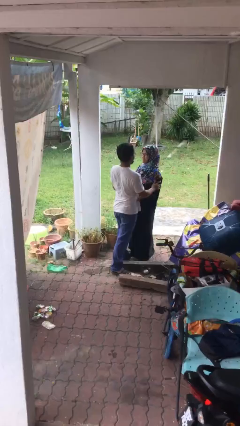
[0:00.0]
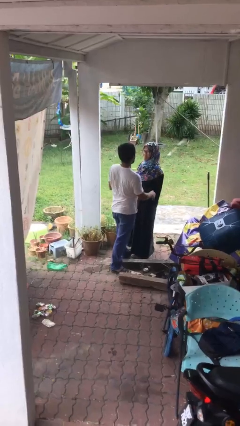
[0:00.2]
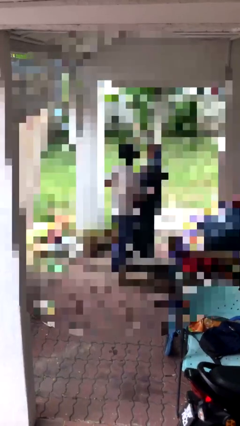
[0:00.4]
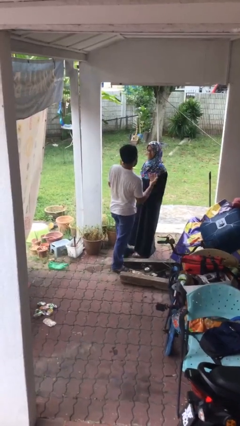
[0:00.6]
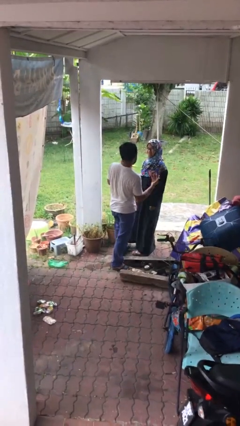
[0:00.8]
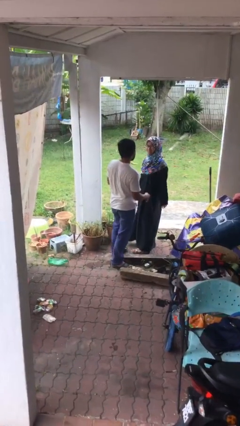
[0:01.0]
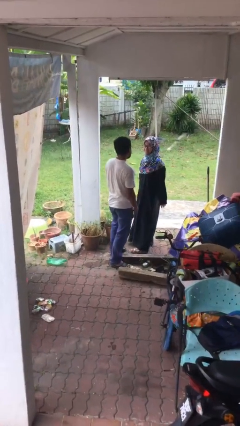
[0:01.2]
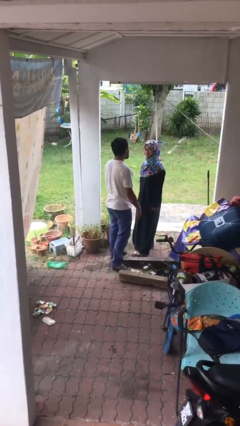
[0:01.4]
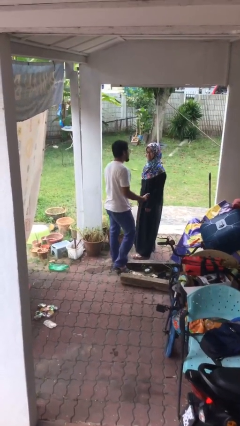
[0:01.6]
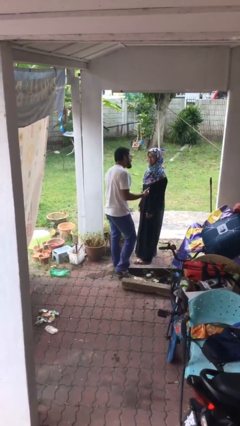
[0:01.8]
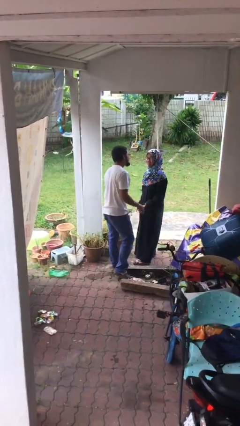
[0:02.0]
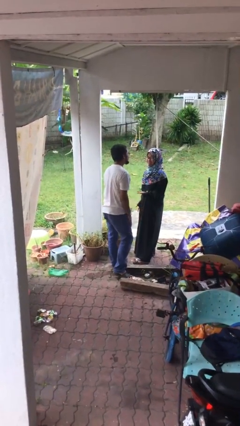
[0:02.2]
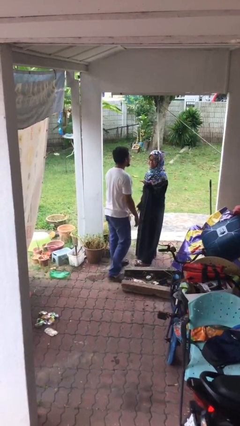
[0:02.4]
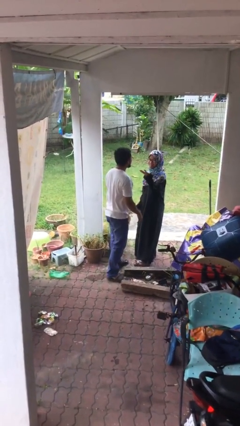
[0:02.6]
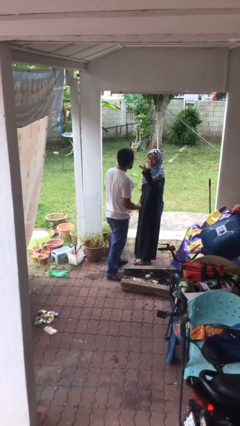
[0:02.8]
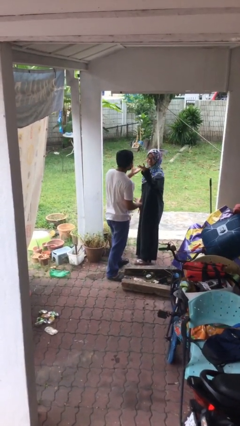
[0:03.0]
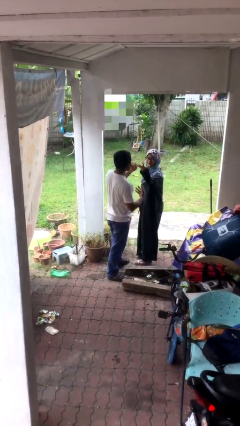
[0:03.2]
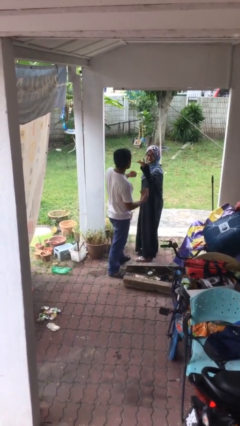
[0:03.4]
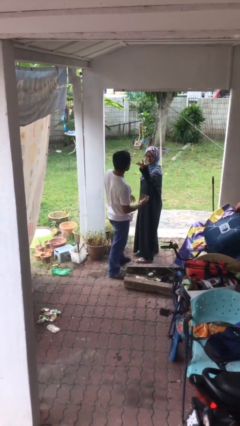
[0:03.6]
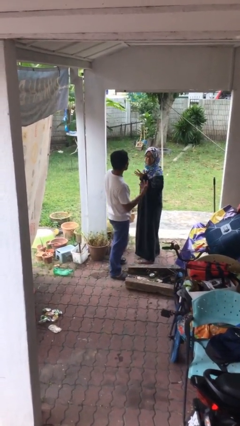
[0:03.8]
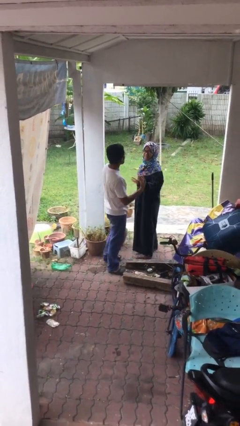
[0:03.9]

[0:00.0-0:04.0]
person talks to person

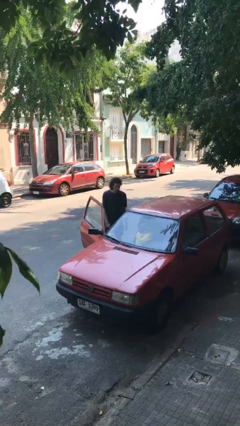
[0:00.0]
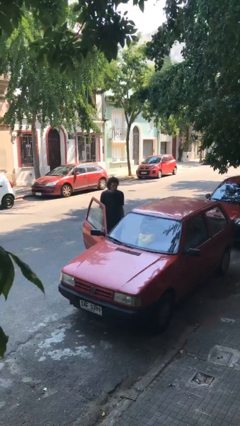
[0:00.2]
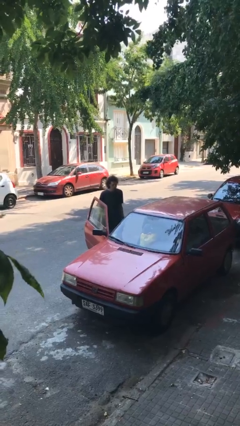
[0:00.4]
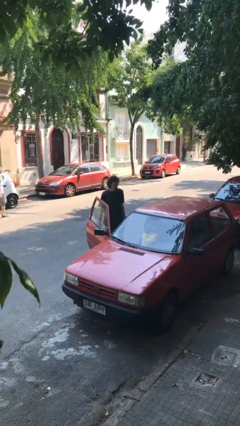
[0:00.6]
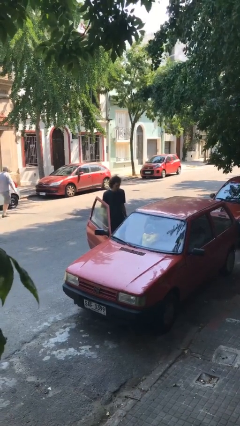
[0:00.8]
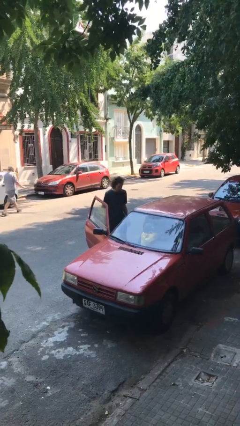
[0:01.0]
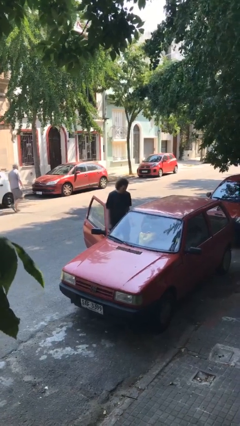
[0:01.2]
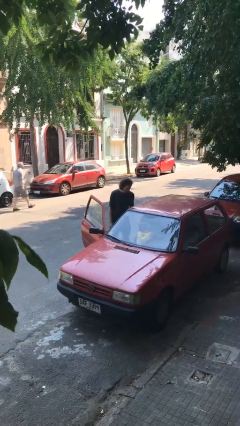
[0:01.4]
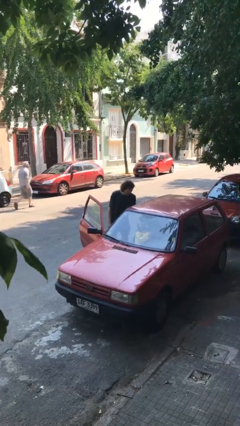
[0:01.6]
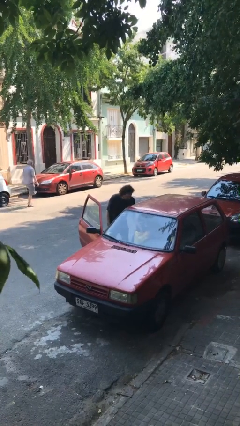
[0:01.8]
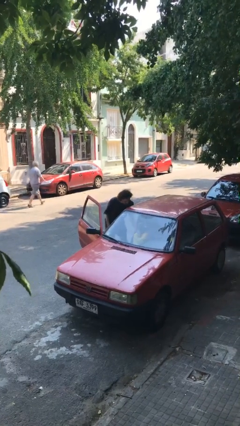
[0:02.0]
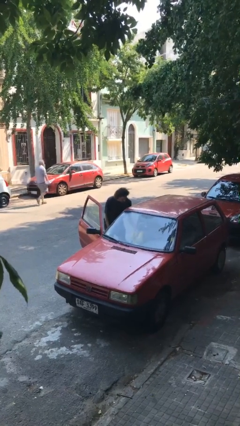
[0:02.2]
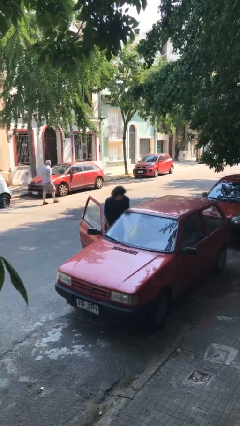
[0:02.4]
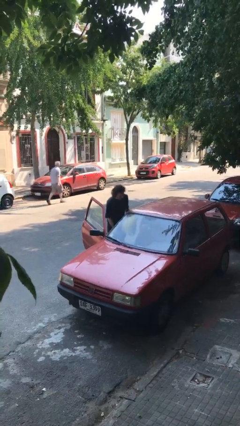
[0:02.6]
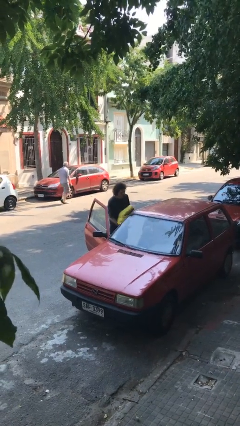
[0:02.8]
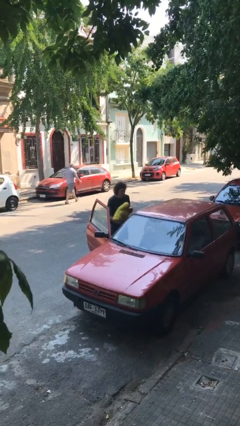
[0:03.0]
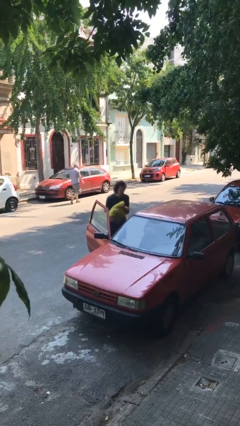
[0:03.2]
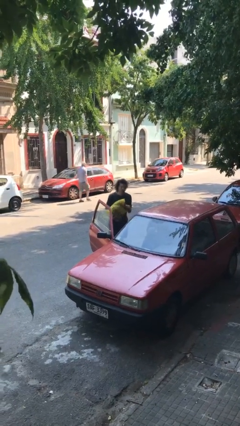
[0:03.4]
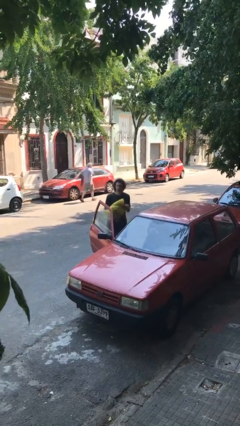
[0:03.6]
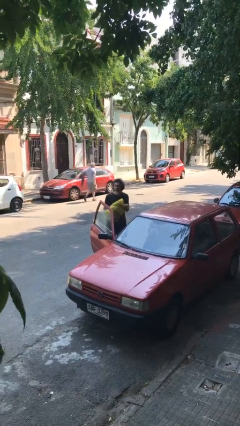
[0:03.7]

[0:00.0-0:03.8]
person unloads car

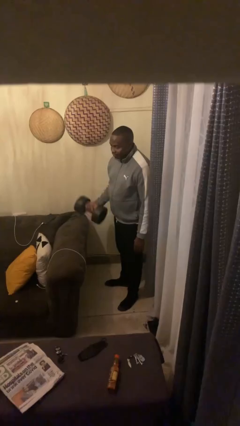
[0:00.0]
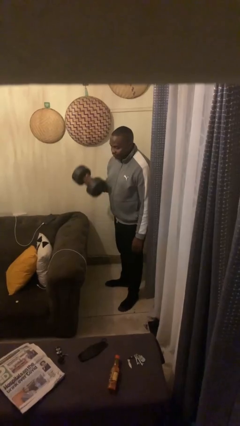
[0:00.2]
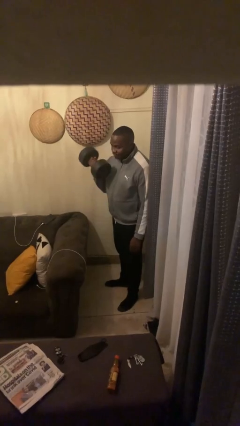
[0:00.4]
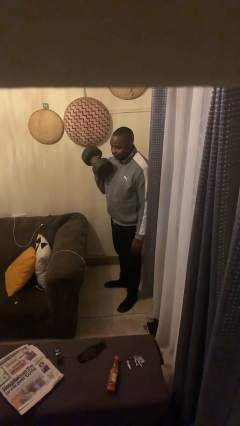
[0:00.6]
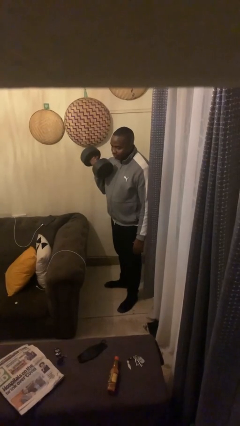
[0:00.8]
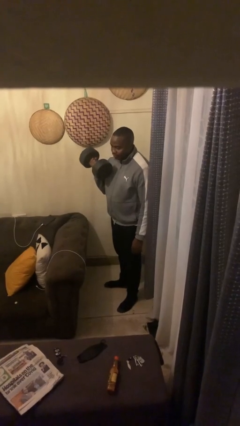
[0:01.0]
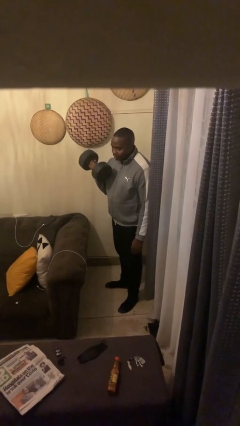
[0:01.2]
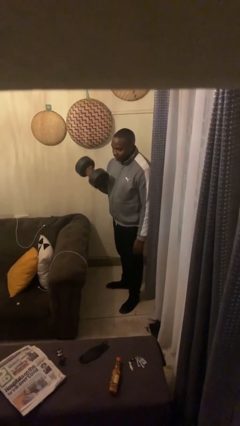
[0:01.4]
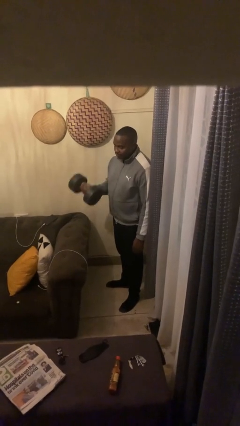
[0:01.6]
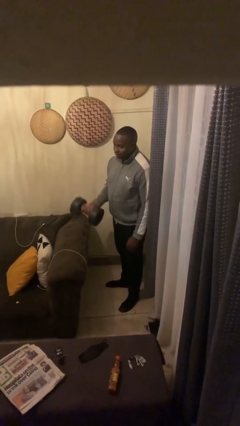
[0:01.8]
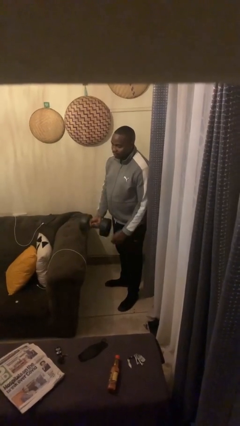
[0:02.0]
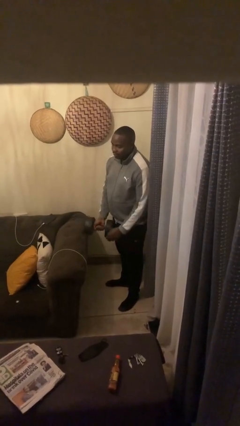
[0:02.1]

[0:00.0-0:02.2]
person lifts dumbbells

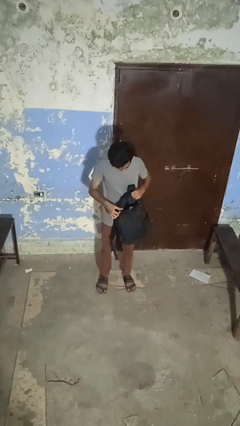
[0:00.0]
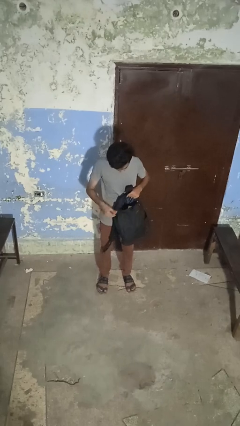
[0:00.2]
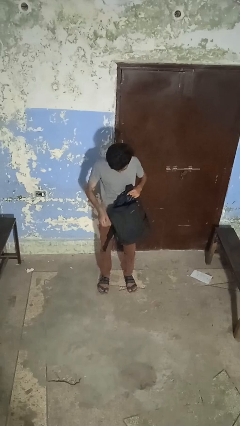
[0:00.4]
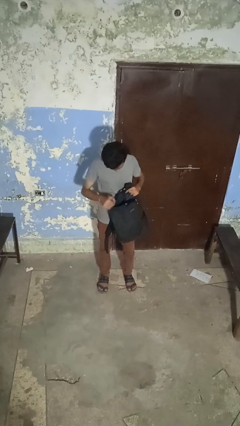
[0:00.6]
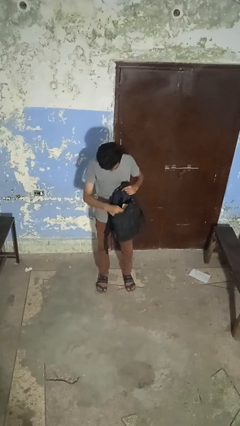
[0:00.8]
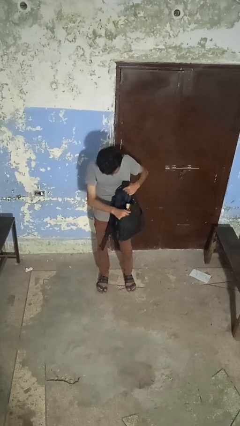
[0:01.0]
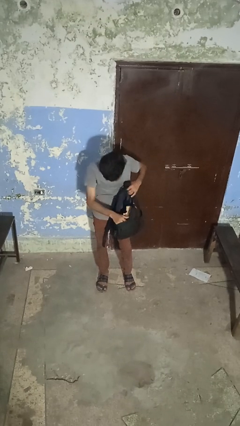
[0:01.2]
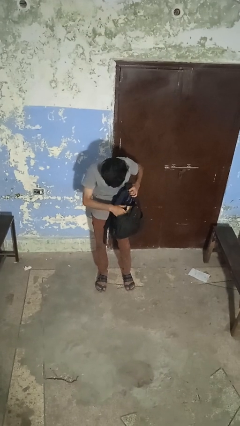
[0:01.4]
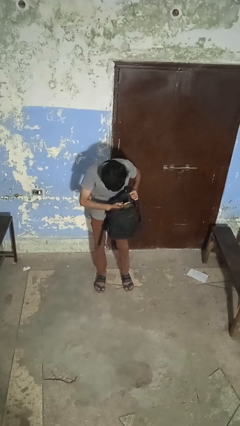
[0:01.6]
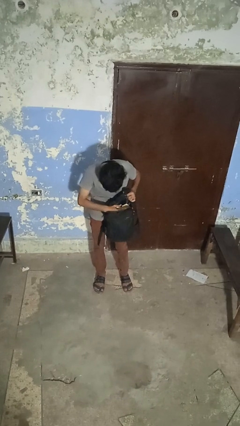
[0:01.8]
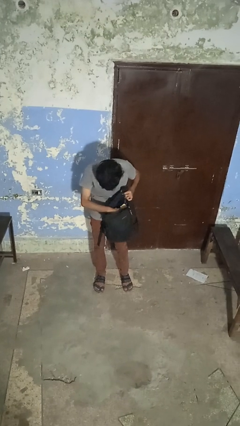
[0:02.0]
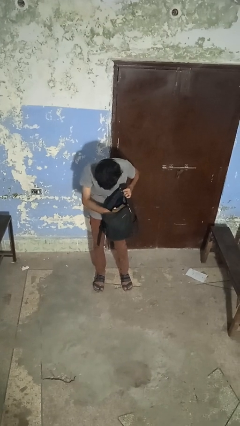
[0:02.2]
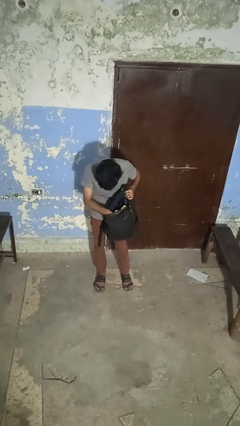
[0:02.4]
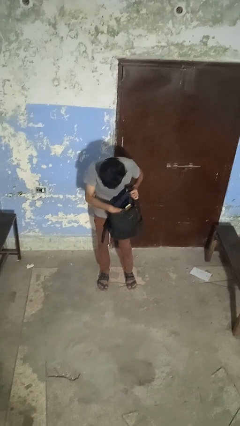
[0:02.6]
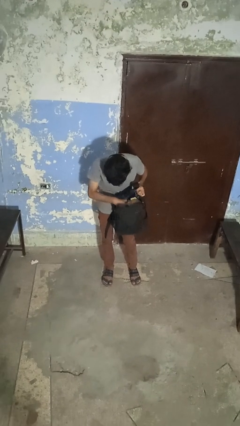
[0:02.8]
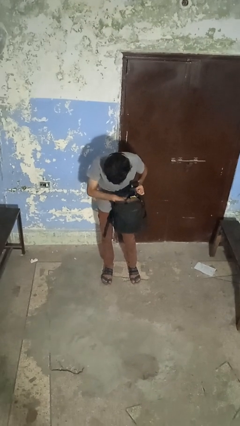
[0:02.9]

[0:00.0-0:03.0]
person searches in backpack

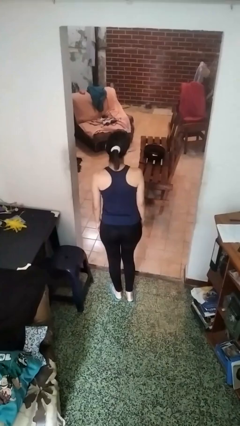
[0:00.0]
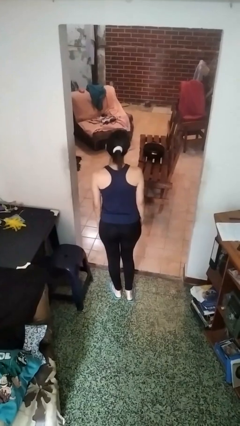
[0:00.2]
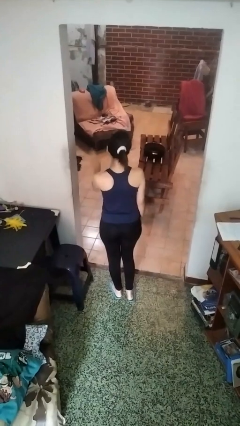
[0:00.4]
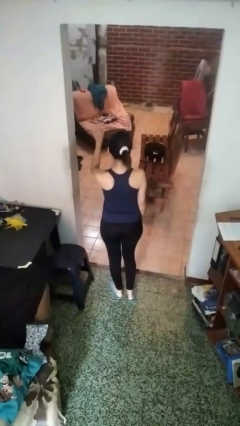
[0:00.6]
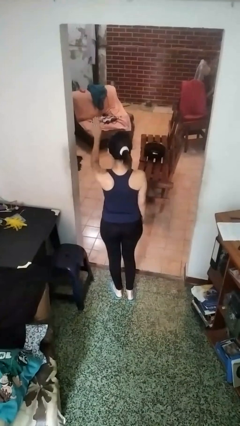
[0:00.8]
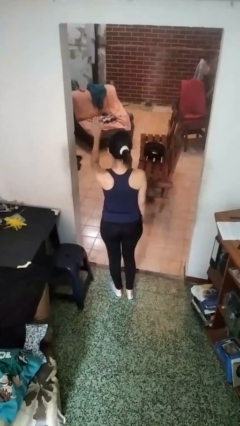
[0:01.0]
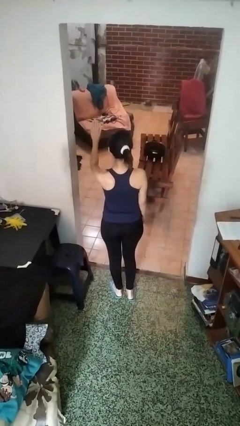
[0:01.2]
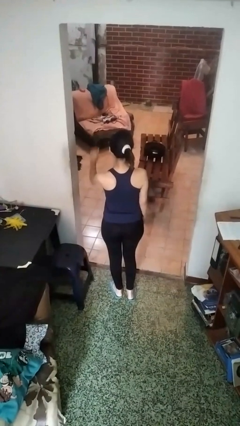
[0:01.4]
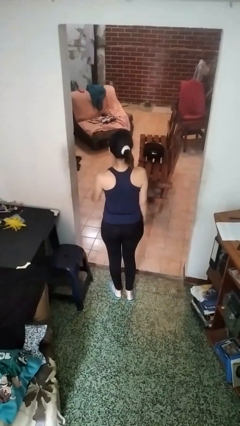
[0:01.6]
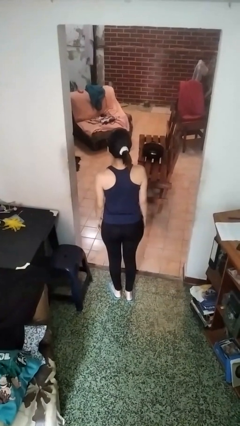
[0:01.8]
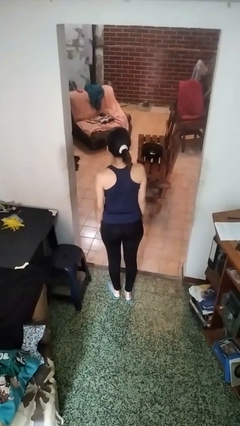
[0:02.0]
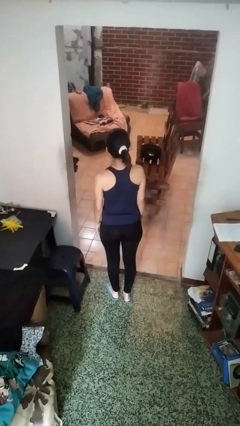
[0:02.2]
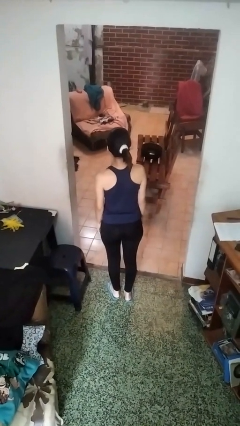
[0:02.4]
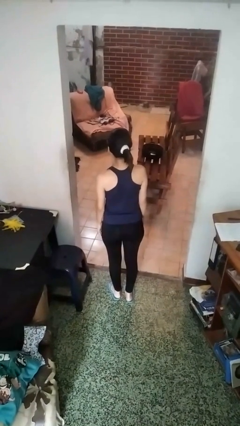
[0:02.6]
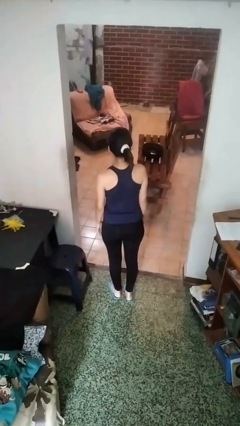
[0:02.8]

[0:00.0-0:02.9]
person gestures stop

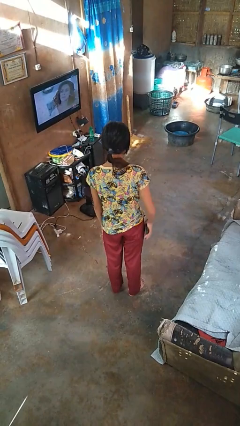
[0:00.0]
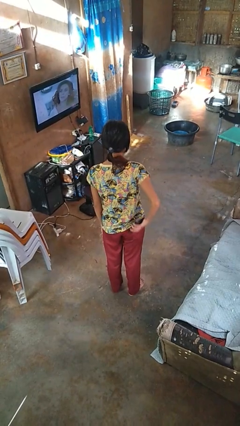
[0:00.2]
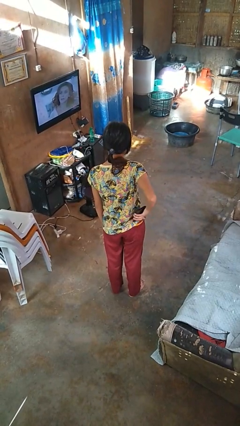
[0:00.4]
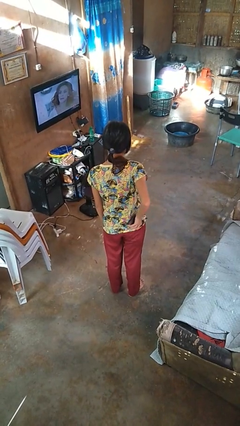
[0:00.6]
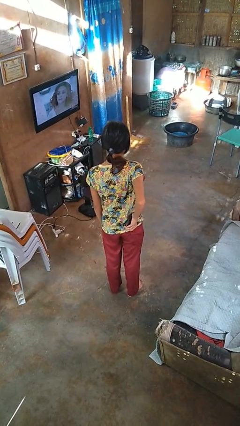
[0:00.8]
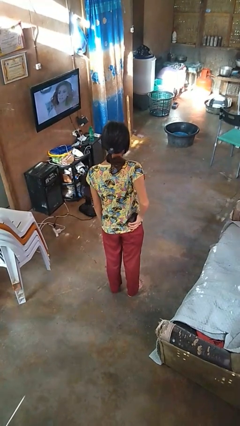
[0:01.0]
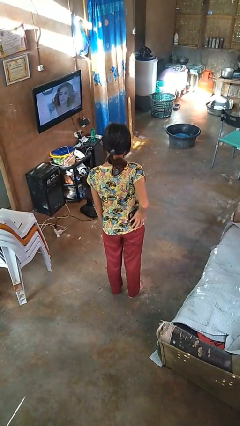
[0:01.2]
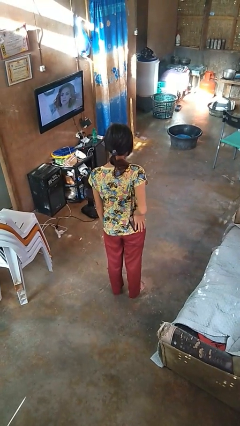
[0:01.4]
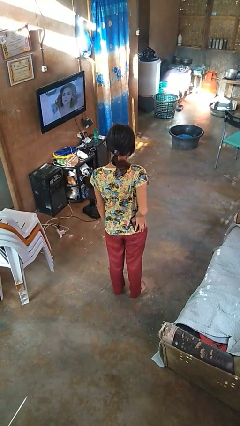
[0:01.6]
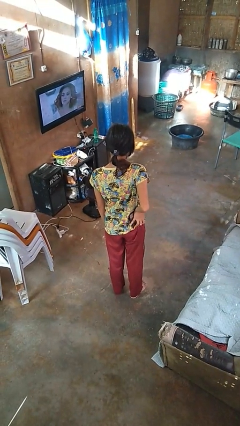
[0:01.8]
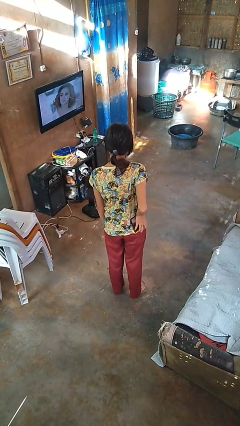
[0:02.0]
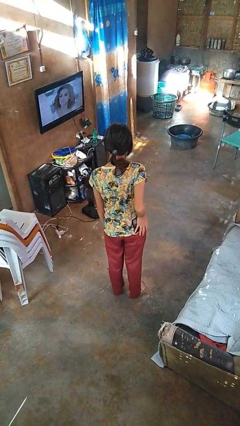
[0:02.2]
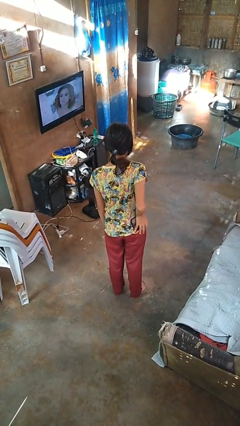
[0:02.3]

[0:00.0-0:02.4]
person puts phone into pocket
